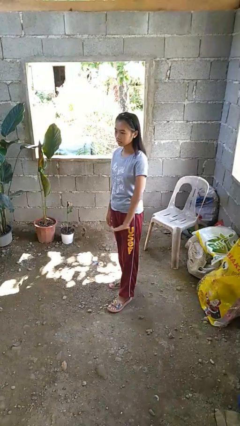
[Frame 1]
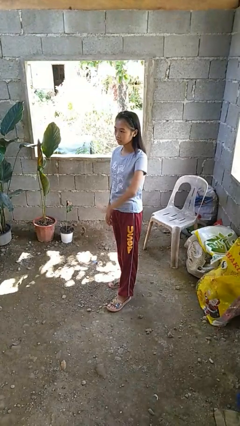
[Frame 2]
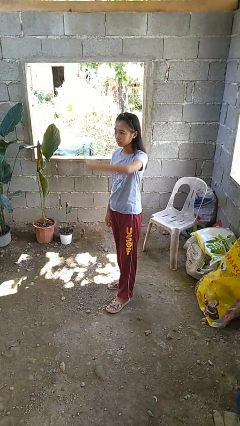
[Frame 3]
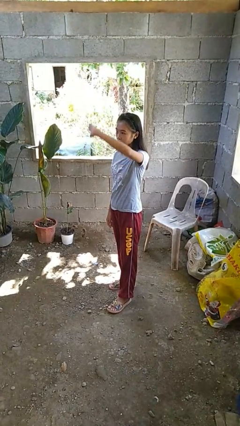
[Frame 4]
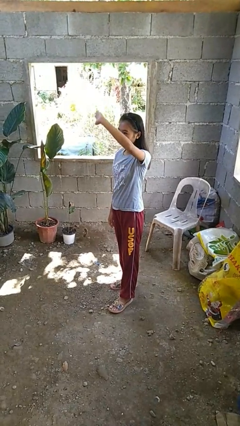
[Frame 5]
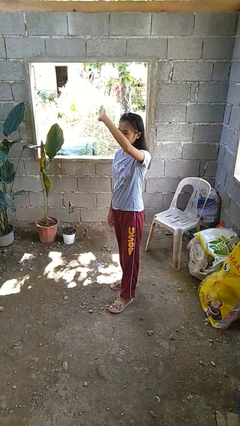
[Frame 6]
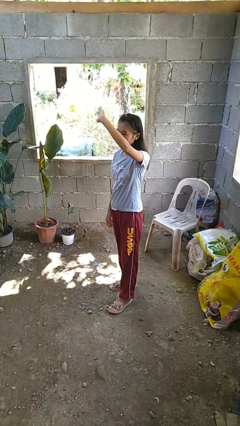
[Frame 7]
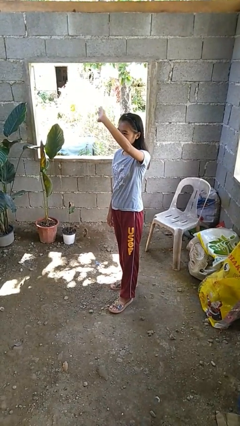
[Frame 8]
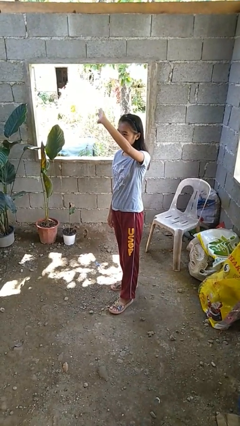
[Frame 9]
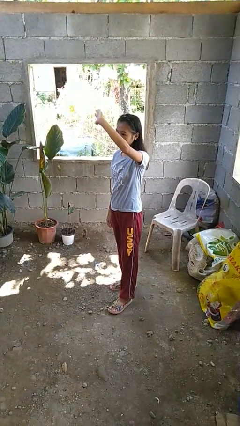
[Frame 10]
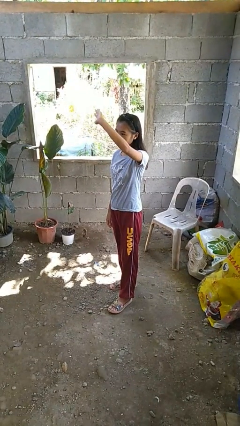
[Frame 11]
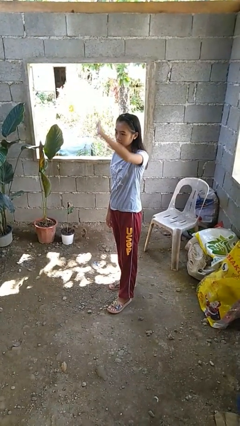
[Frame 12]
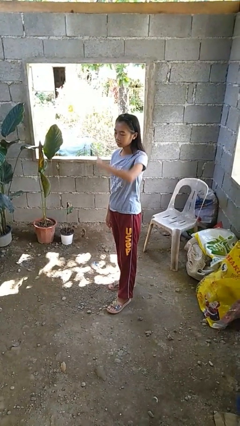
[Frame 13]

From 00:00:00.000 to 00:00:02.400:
person gestures swipe up

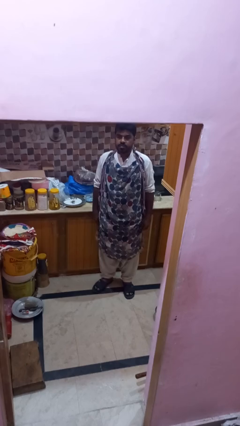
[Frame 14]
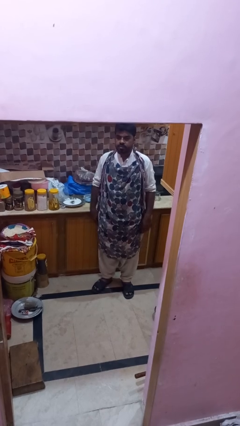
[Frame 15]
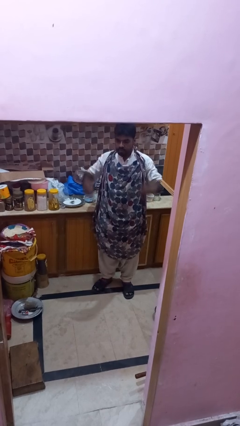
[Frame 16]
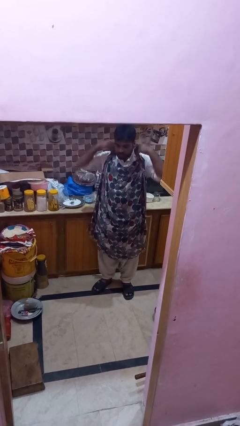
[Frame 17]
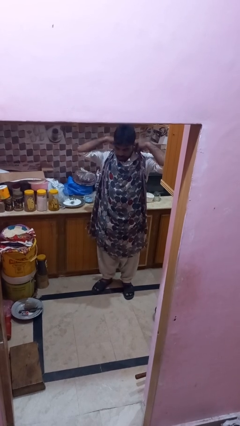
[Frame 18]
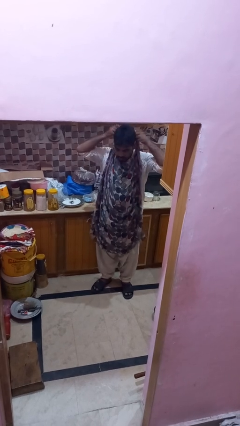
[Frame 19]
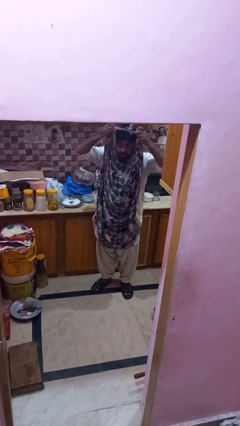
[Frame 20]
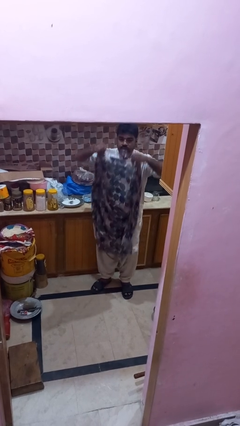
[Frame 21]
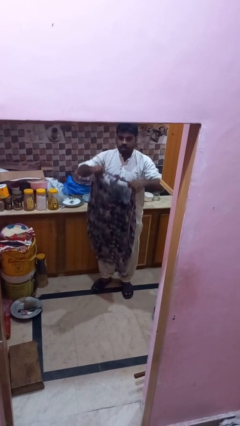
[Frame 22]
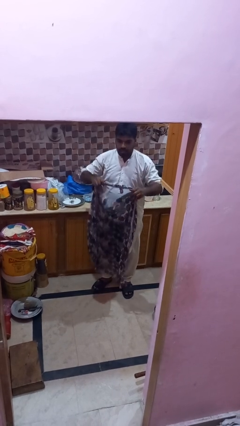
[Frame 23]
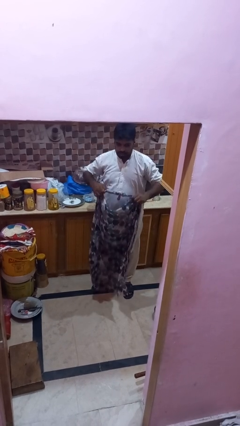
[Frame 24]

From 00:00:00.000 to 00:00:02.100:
person takes off apron

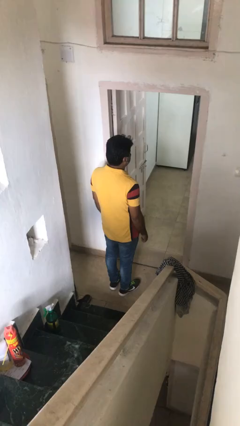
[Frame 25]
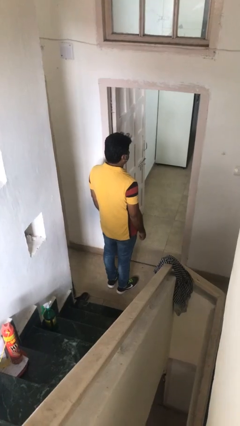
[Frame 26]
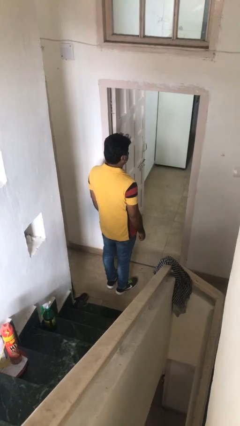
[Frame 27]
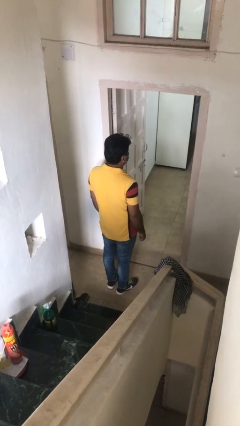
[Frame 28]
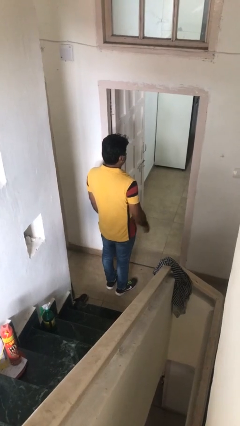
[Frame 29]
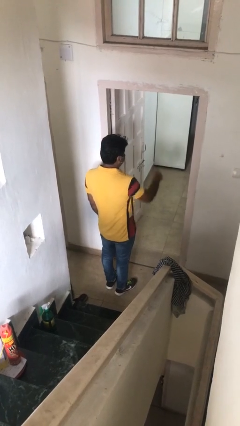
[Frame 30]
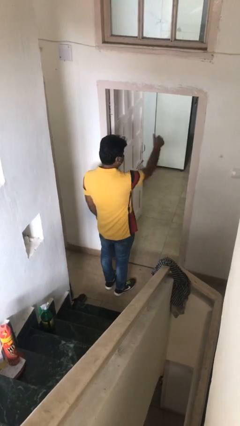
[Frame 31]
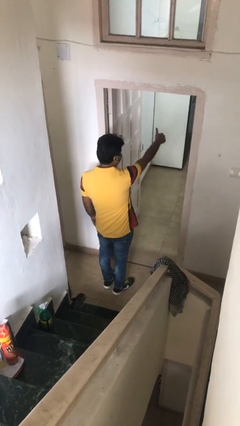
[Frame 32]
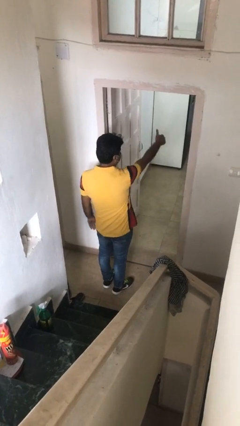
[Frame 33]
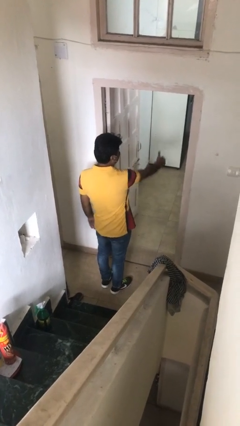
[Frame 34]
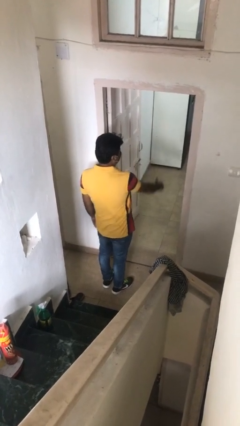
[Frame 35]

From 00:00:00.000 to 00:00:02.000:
person gestures thumbs up

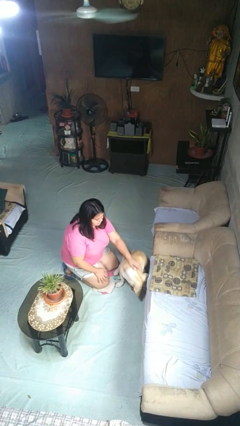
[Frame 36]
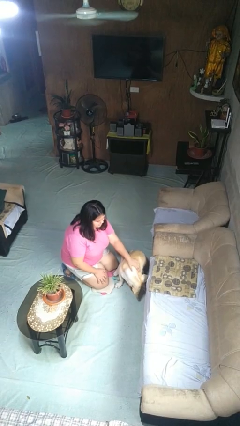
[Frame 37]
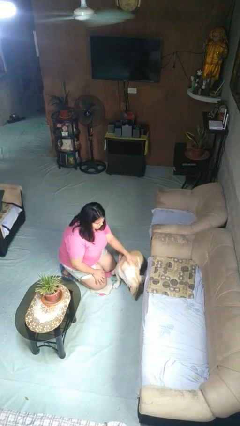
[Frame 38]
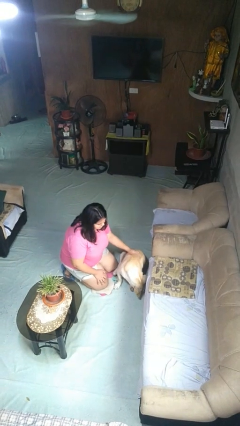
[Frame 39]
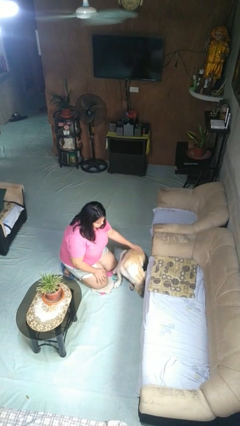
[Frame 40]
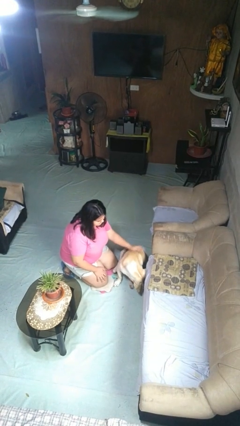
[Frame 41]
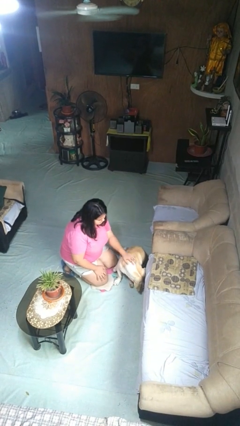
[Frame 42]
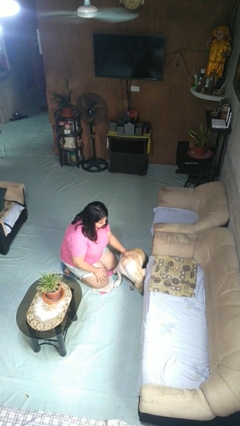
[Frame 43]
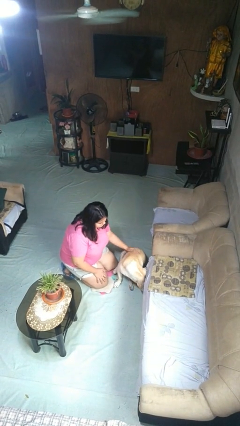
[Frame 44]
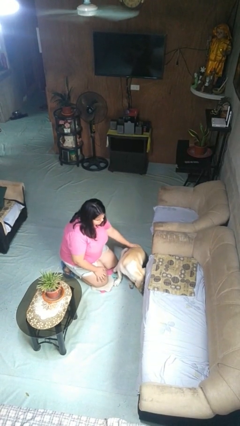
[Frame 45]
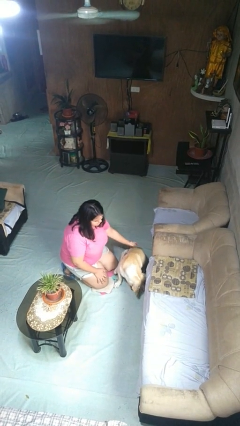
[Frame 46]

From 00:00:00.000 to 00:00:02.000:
person pets dog

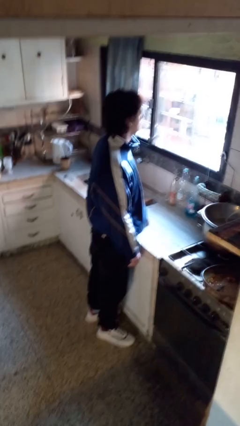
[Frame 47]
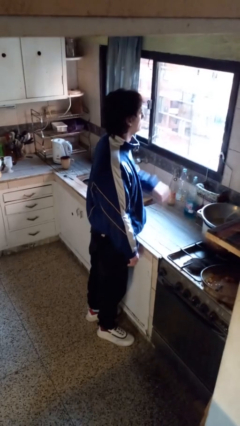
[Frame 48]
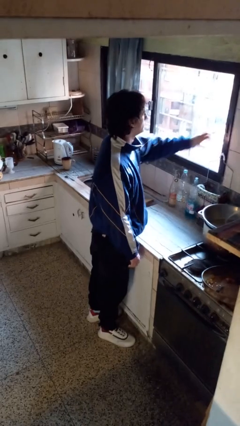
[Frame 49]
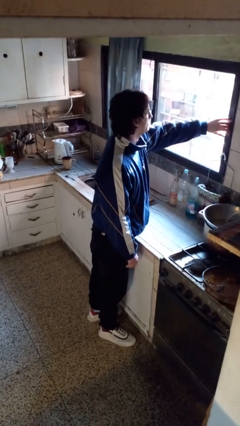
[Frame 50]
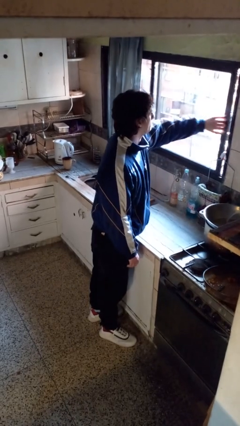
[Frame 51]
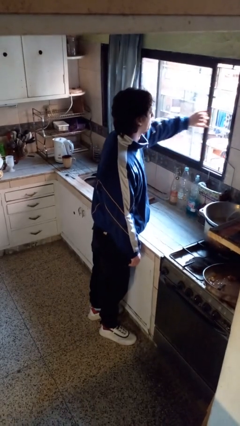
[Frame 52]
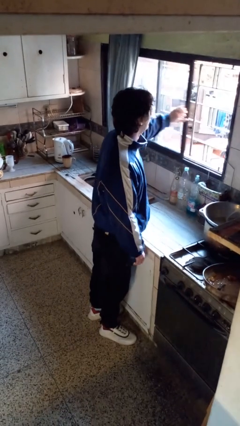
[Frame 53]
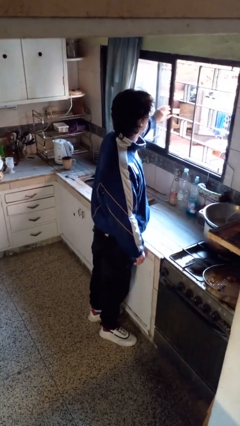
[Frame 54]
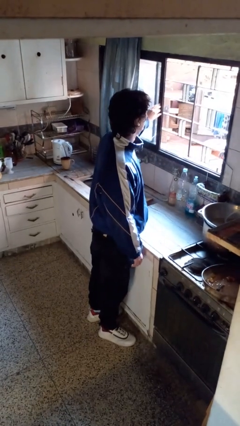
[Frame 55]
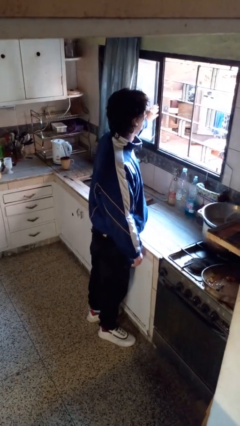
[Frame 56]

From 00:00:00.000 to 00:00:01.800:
person opens home window

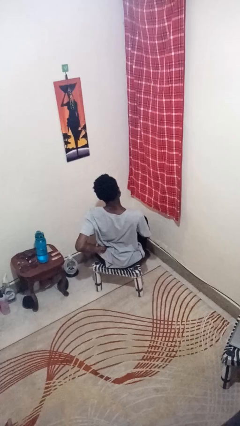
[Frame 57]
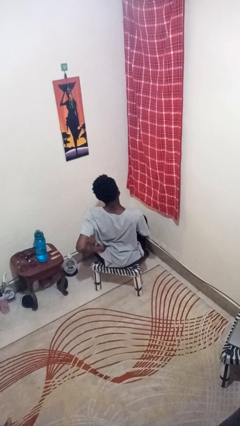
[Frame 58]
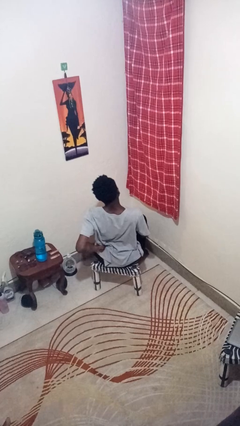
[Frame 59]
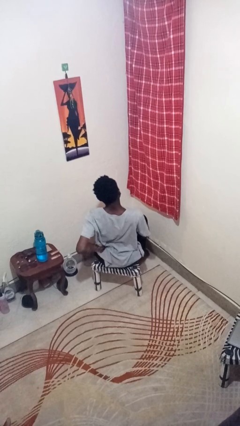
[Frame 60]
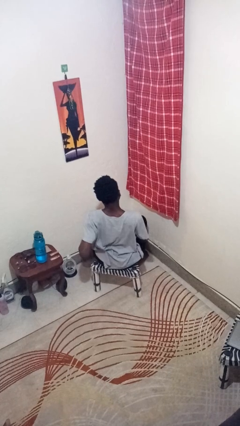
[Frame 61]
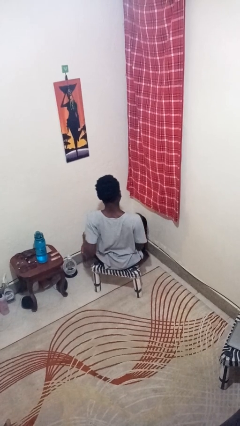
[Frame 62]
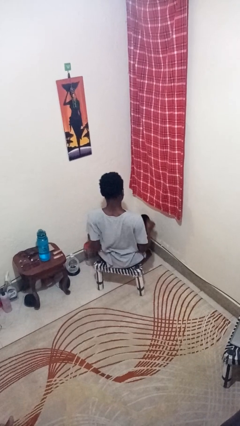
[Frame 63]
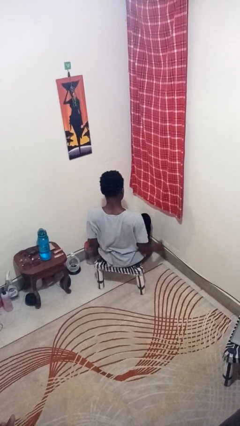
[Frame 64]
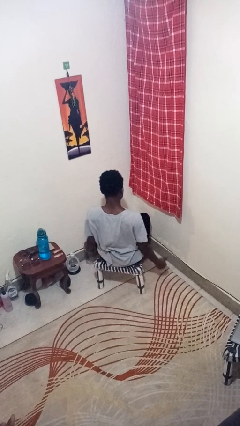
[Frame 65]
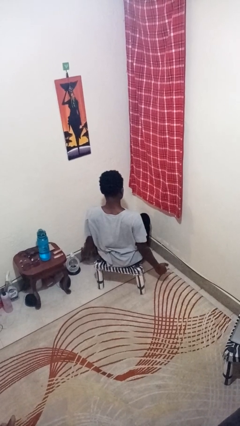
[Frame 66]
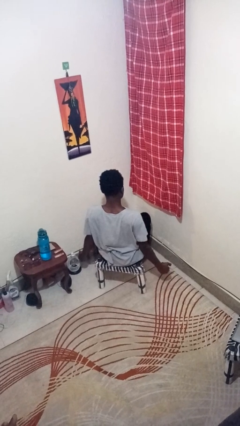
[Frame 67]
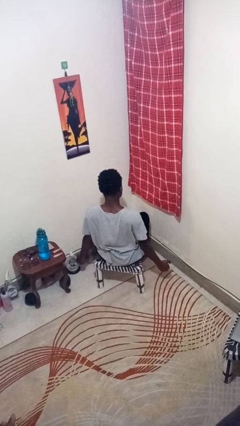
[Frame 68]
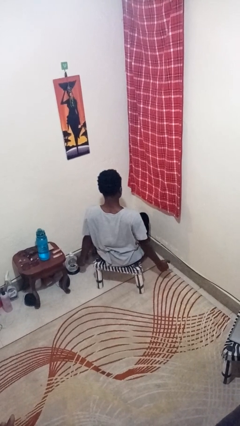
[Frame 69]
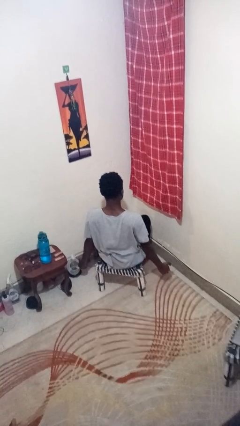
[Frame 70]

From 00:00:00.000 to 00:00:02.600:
person stretches arms to side

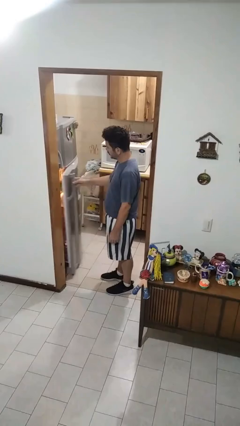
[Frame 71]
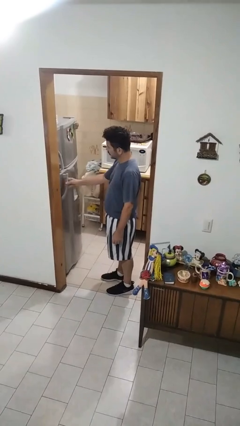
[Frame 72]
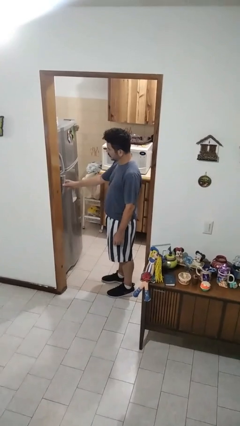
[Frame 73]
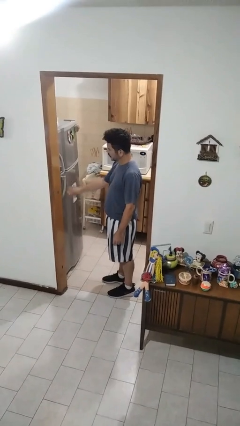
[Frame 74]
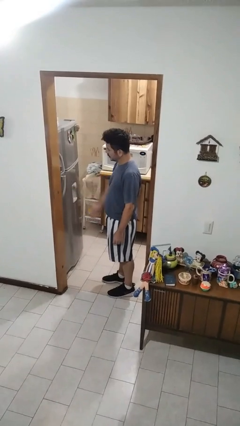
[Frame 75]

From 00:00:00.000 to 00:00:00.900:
person closes refrigerator

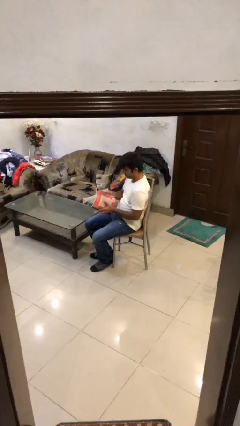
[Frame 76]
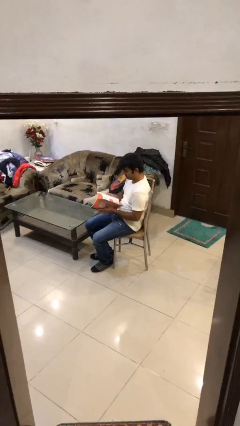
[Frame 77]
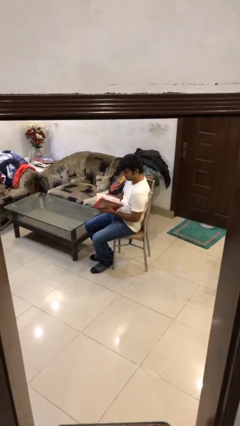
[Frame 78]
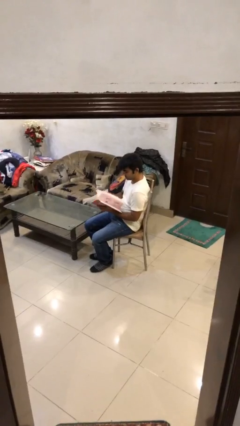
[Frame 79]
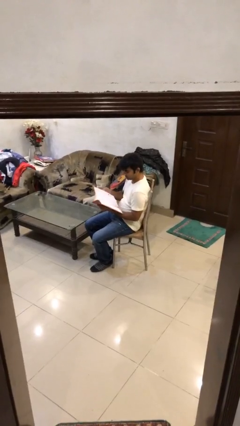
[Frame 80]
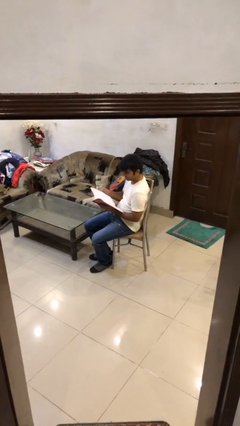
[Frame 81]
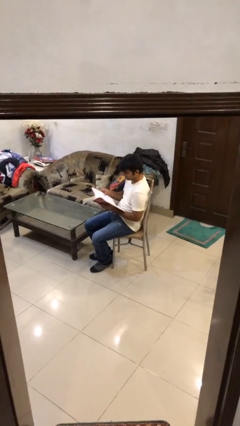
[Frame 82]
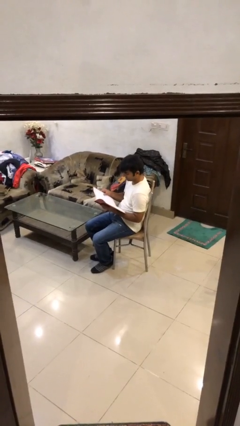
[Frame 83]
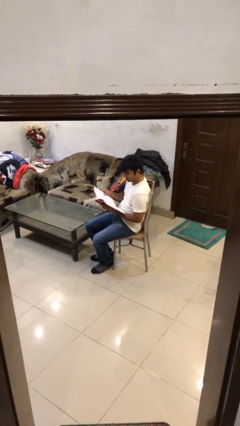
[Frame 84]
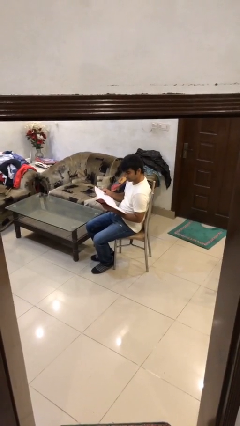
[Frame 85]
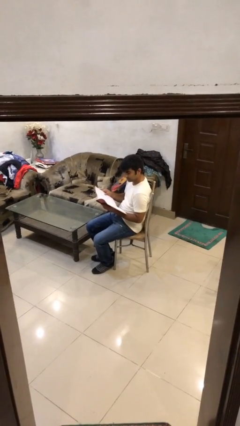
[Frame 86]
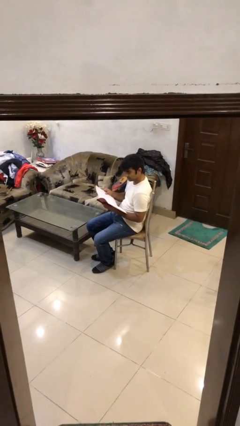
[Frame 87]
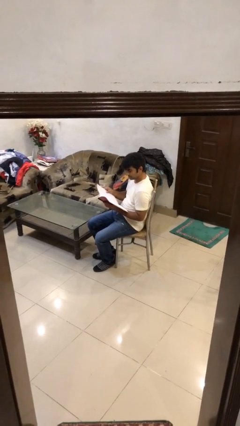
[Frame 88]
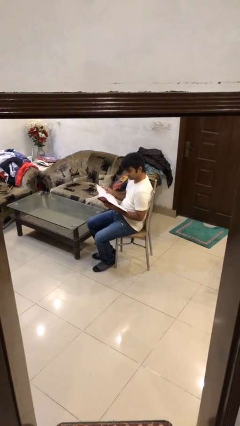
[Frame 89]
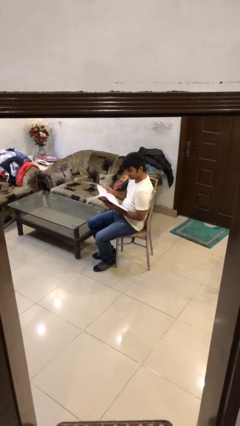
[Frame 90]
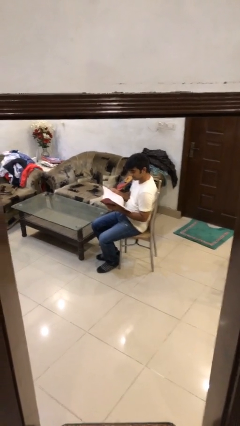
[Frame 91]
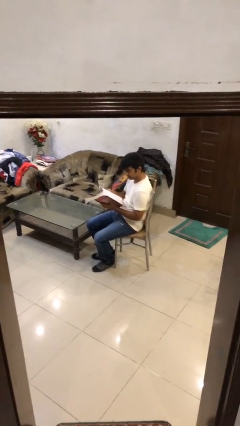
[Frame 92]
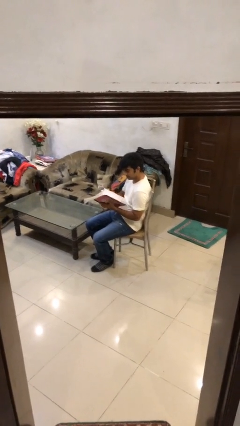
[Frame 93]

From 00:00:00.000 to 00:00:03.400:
person reads document
